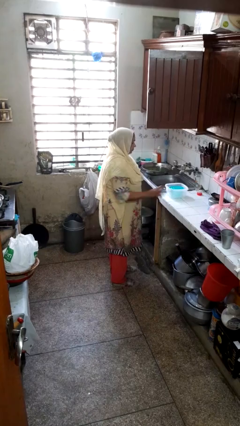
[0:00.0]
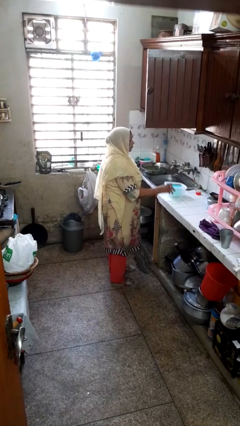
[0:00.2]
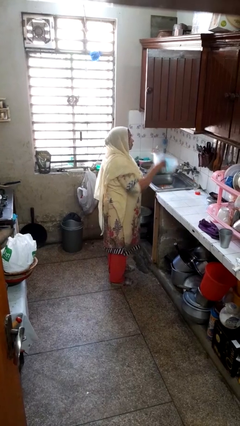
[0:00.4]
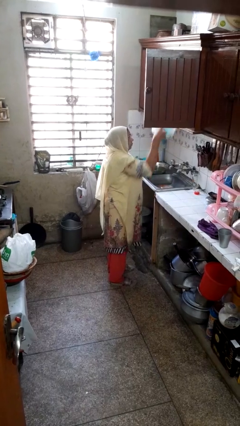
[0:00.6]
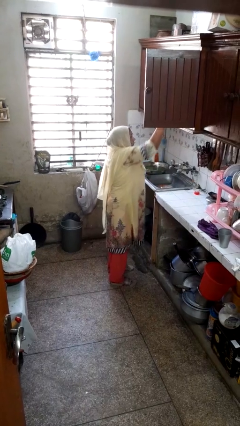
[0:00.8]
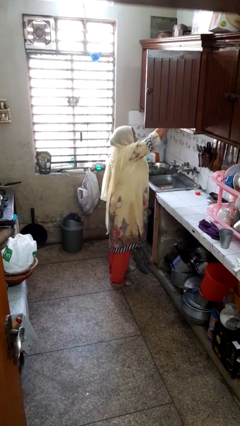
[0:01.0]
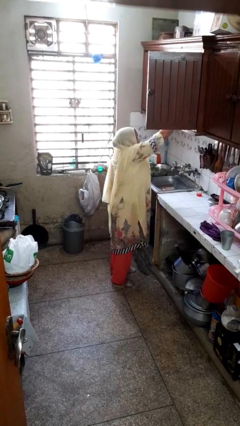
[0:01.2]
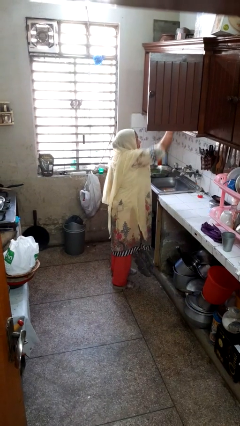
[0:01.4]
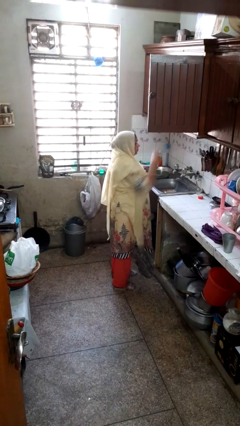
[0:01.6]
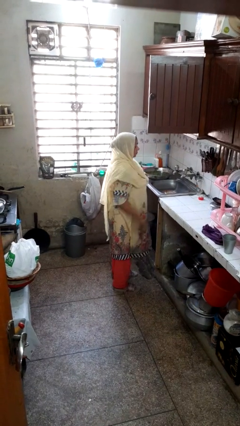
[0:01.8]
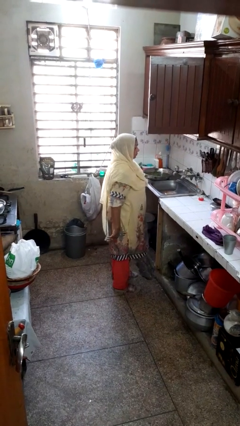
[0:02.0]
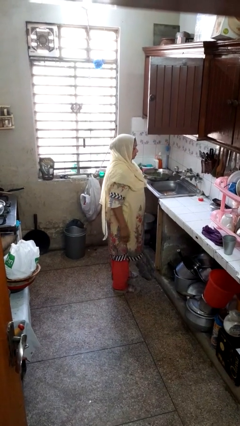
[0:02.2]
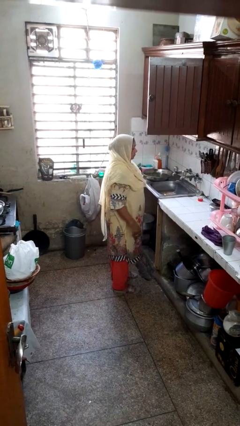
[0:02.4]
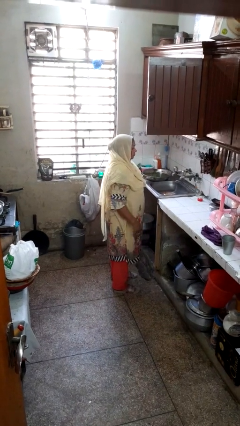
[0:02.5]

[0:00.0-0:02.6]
person puts object in cabinet

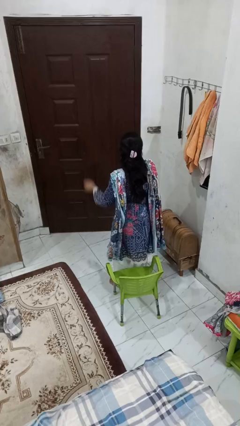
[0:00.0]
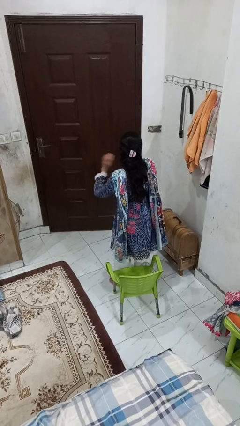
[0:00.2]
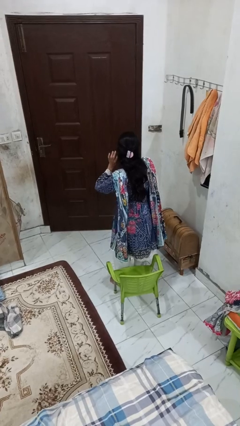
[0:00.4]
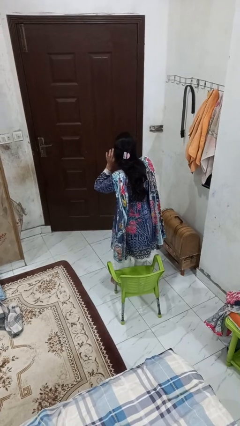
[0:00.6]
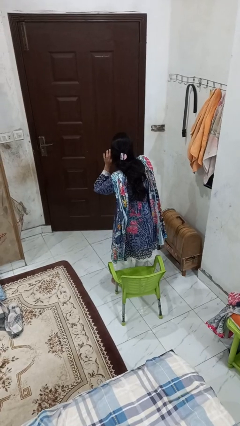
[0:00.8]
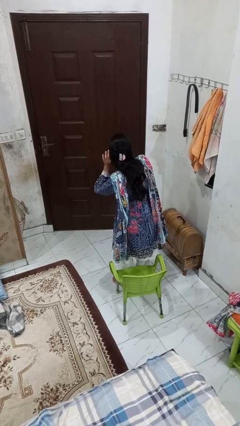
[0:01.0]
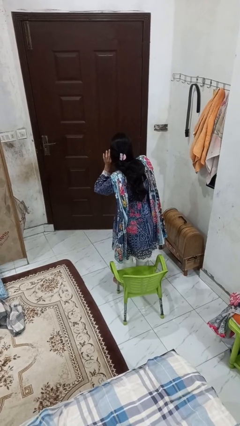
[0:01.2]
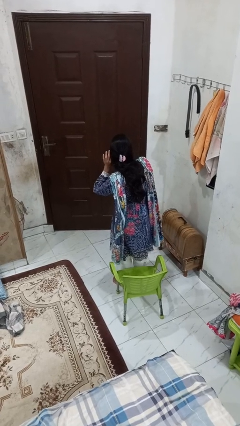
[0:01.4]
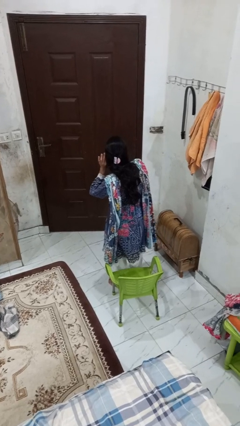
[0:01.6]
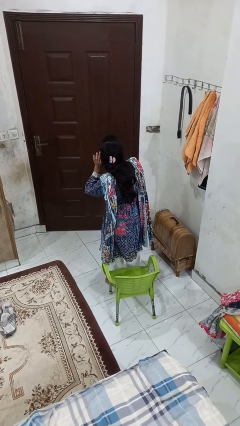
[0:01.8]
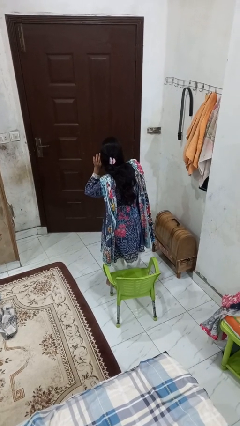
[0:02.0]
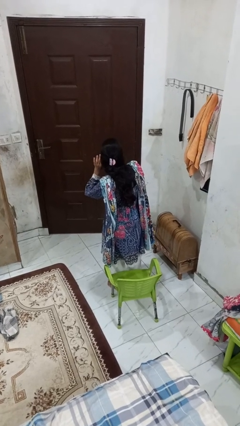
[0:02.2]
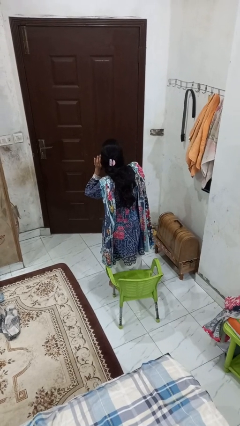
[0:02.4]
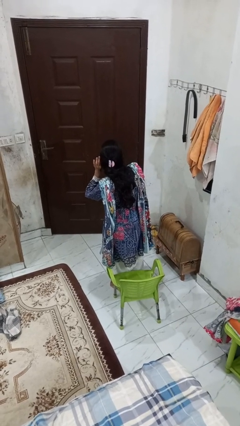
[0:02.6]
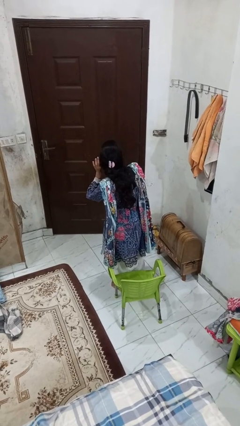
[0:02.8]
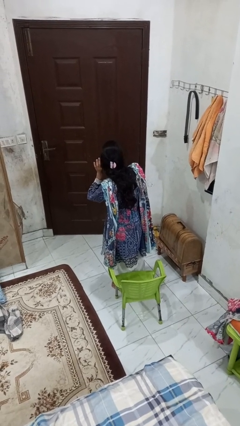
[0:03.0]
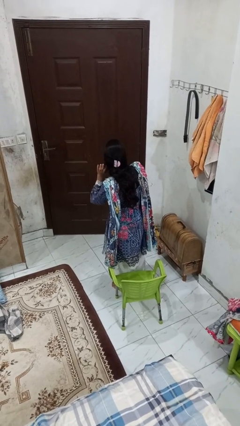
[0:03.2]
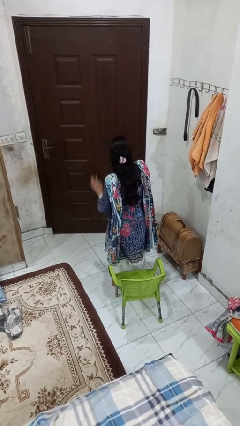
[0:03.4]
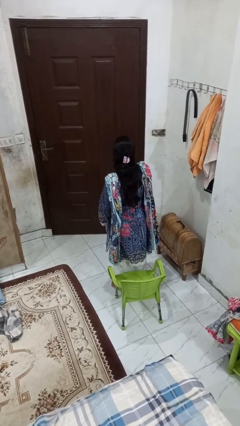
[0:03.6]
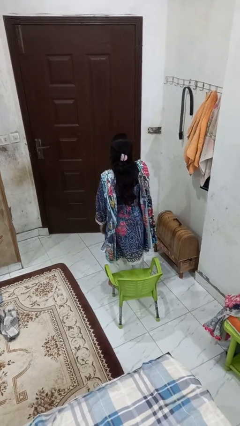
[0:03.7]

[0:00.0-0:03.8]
person gestures listen closely

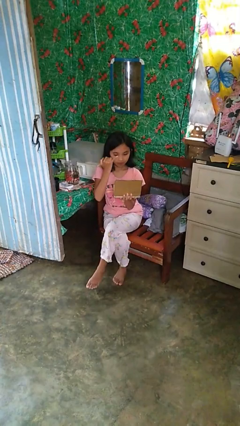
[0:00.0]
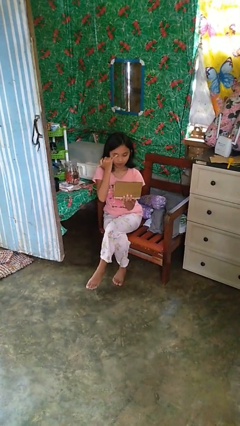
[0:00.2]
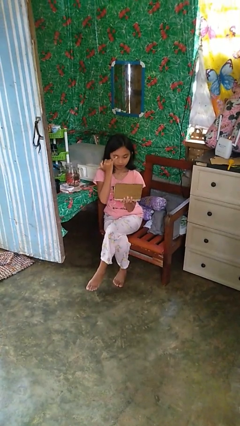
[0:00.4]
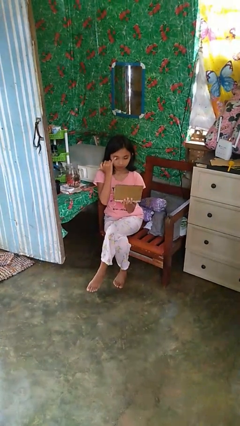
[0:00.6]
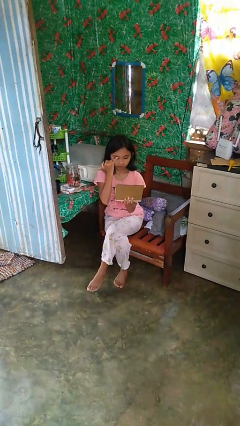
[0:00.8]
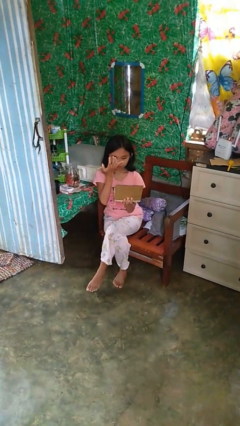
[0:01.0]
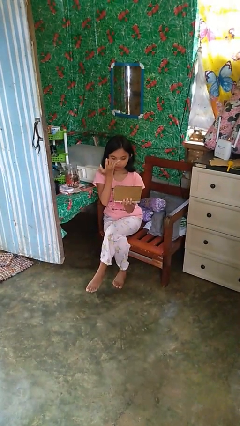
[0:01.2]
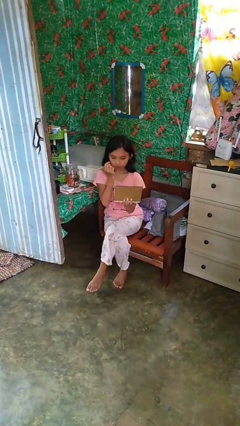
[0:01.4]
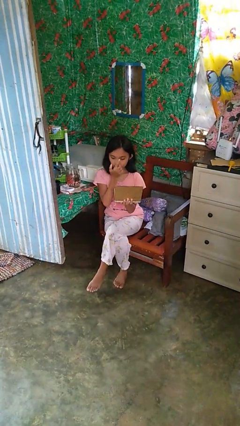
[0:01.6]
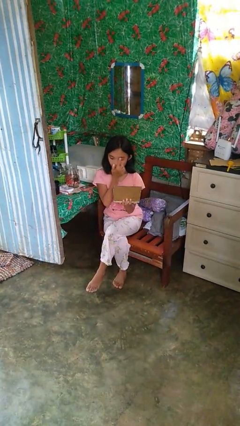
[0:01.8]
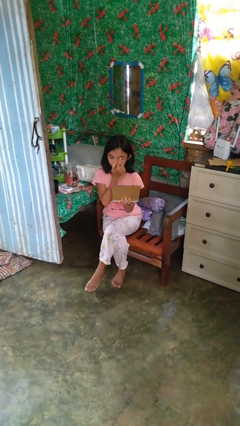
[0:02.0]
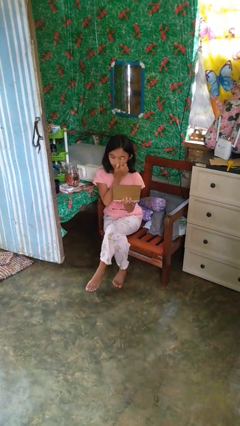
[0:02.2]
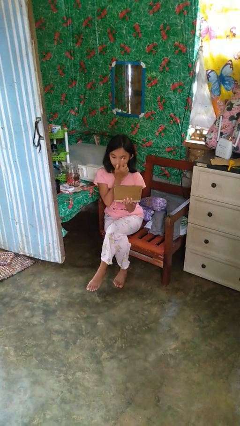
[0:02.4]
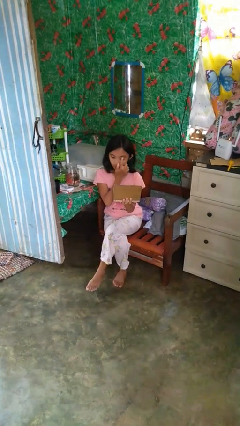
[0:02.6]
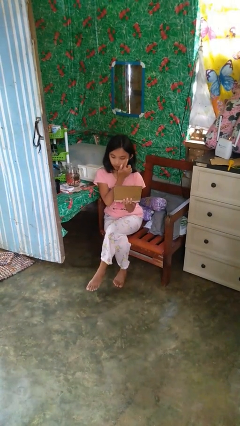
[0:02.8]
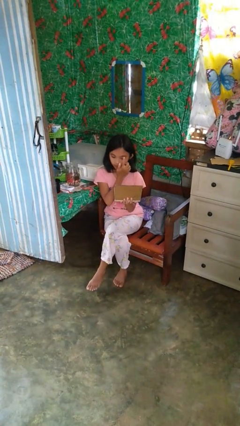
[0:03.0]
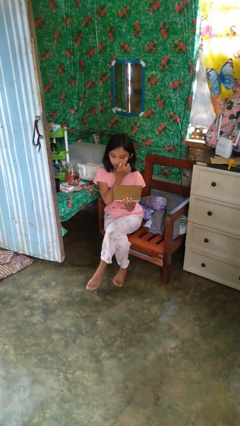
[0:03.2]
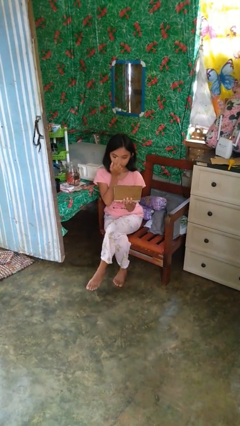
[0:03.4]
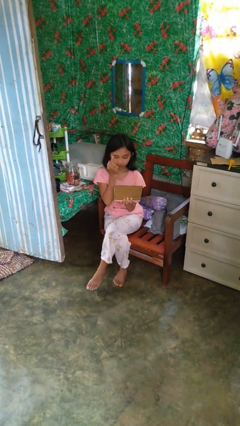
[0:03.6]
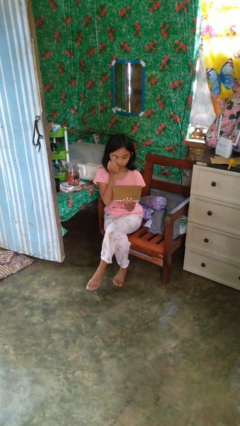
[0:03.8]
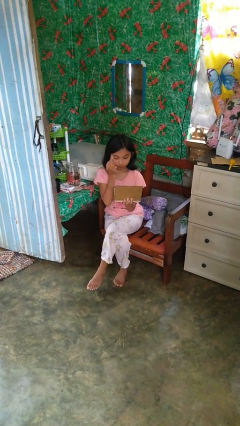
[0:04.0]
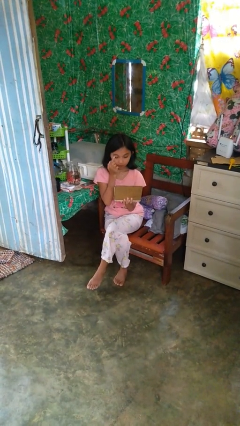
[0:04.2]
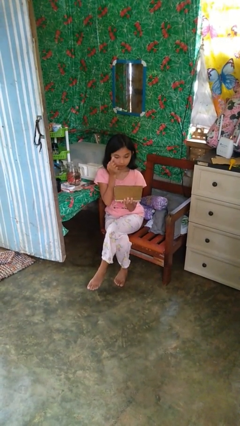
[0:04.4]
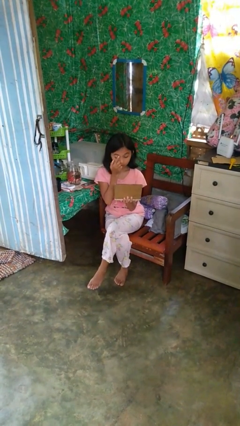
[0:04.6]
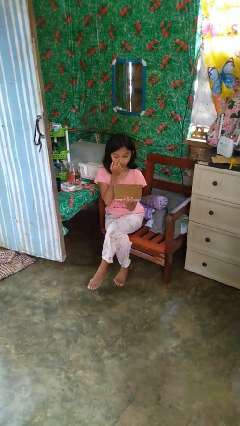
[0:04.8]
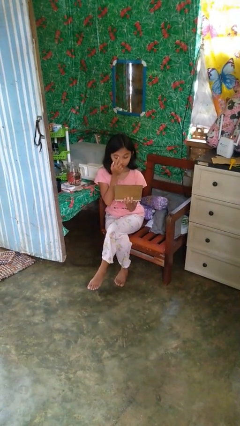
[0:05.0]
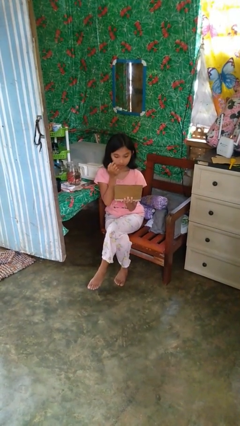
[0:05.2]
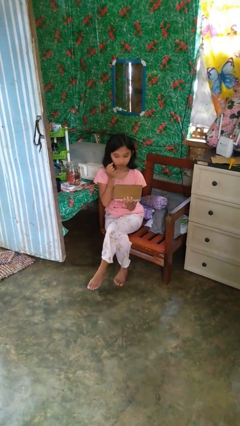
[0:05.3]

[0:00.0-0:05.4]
person applies eye makeup

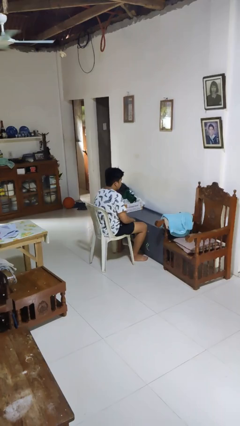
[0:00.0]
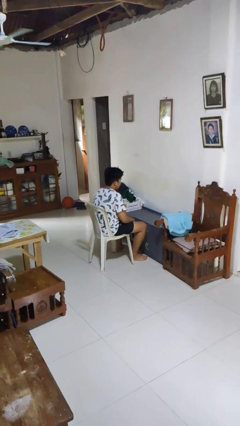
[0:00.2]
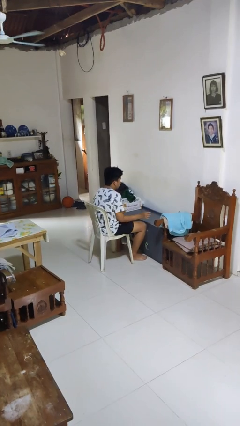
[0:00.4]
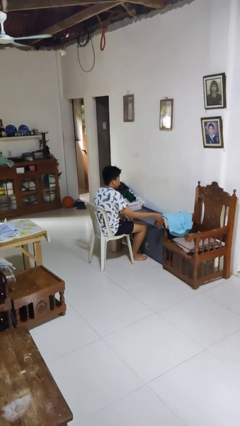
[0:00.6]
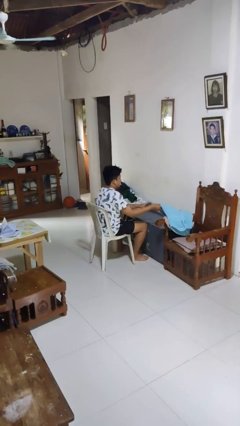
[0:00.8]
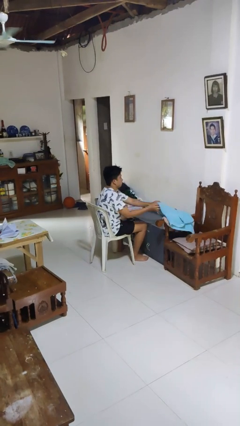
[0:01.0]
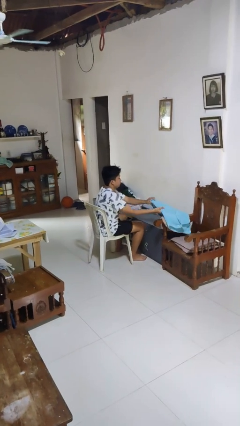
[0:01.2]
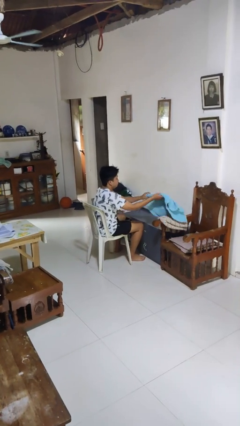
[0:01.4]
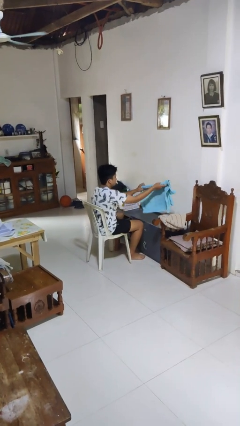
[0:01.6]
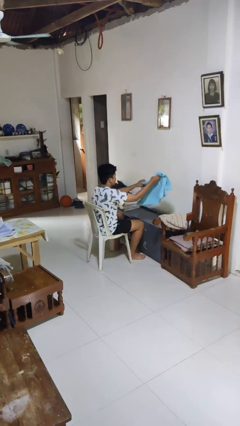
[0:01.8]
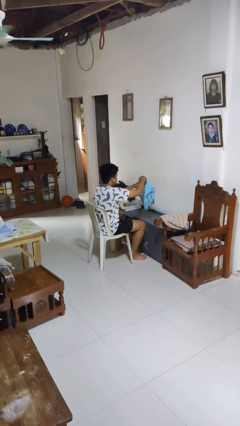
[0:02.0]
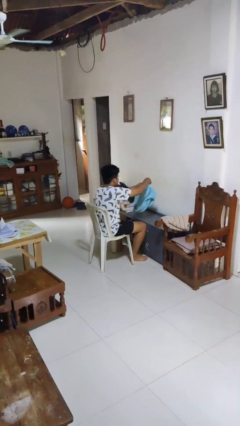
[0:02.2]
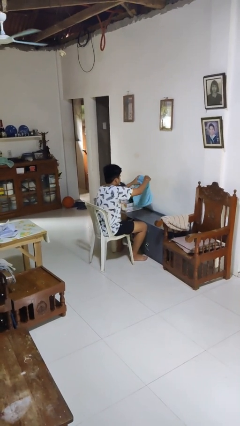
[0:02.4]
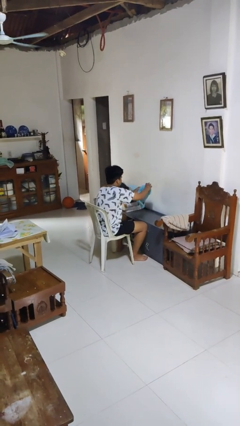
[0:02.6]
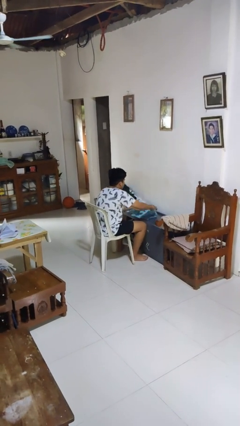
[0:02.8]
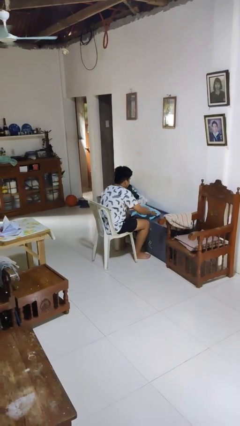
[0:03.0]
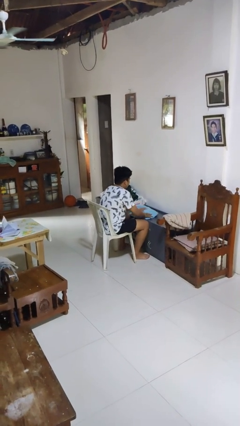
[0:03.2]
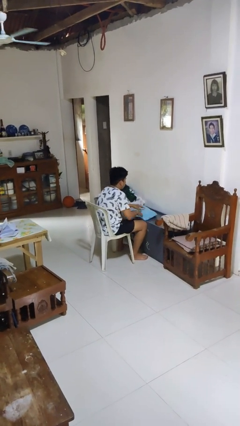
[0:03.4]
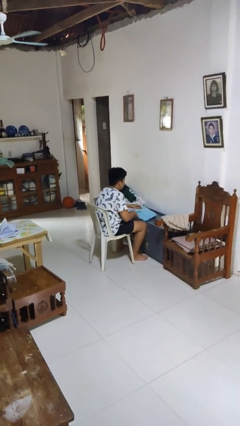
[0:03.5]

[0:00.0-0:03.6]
person folds towel

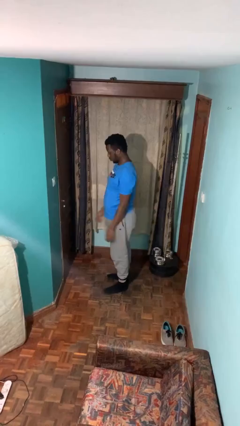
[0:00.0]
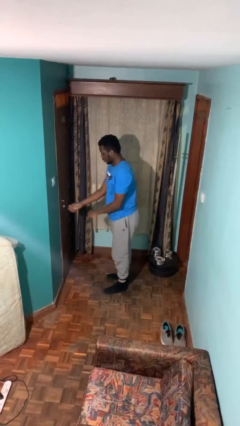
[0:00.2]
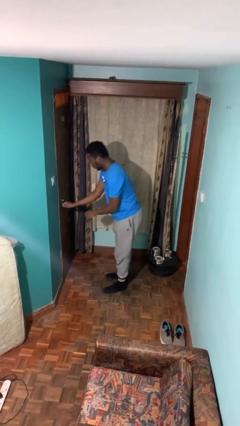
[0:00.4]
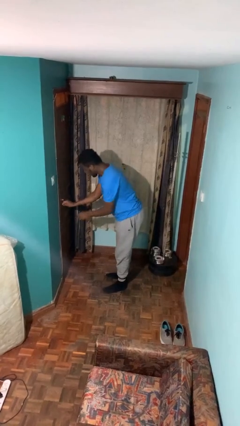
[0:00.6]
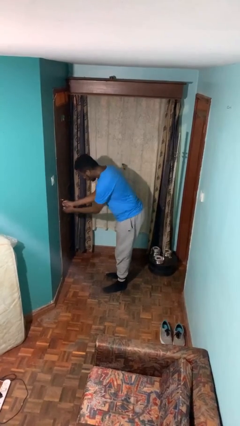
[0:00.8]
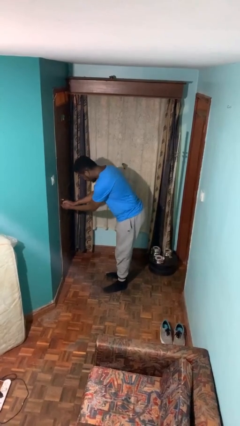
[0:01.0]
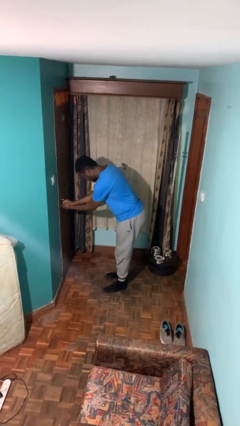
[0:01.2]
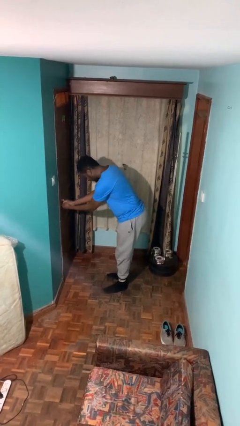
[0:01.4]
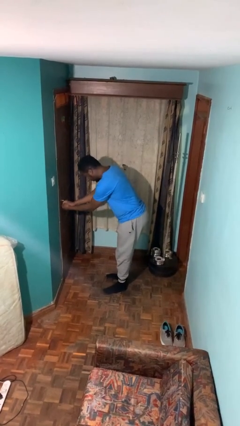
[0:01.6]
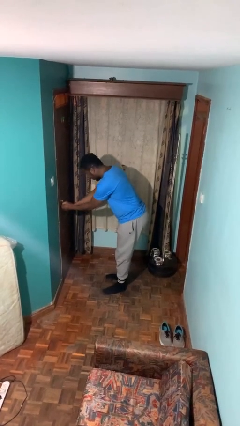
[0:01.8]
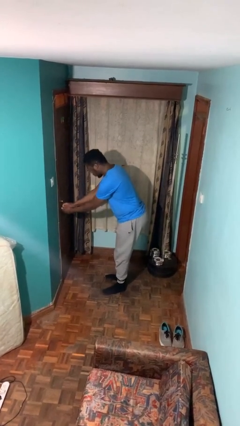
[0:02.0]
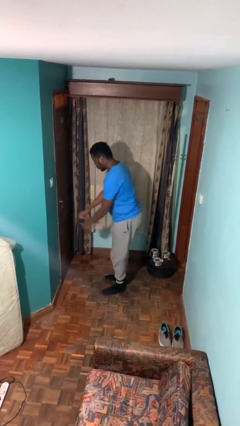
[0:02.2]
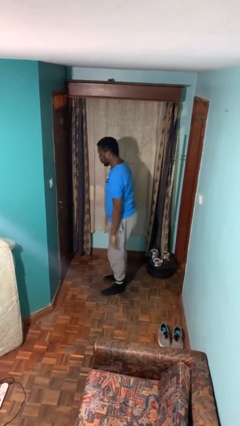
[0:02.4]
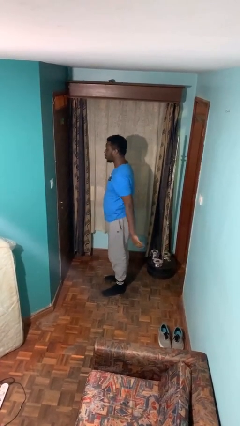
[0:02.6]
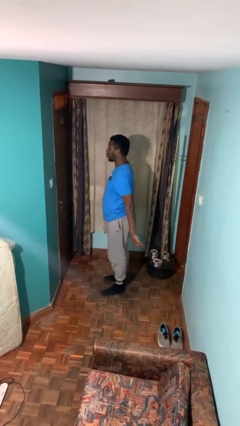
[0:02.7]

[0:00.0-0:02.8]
person locks door with keys
